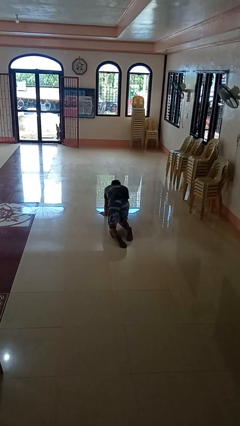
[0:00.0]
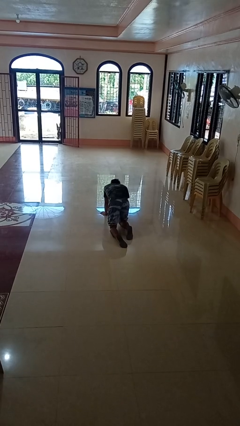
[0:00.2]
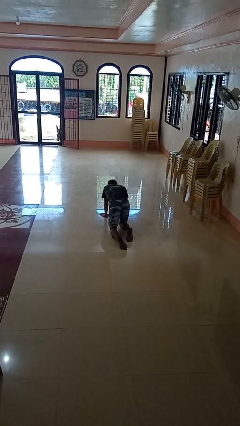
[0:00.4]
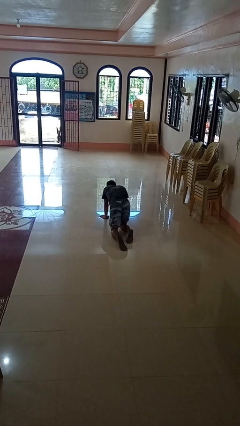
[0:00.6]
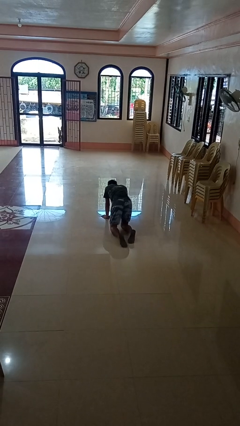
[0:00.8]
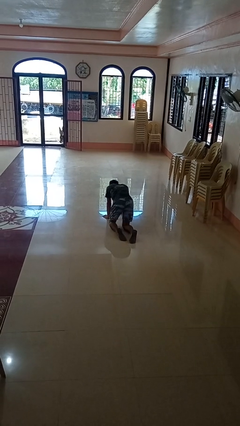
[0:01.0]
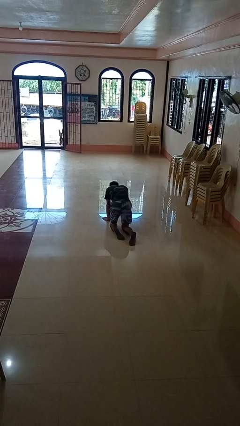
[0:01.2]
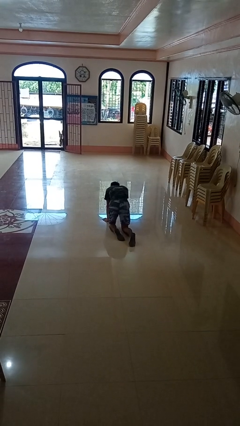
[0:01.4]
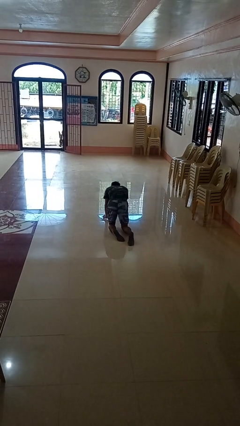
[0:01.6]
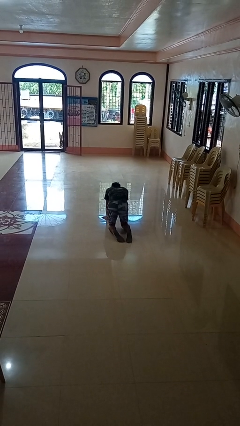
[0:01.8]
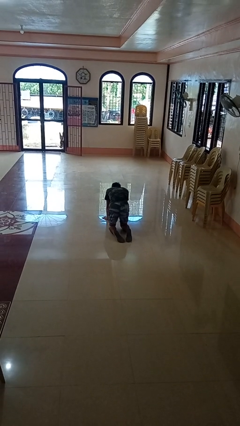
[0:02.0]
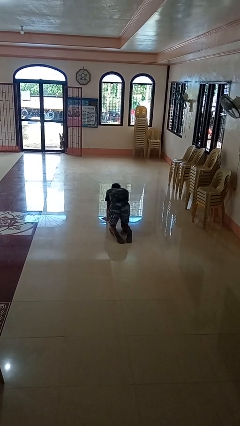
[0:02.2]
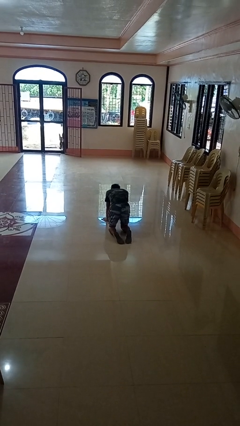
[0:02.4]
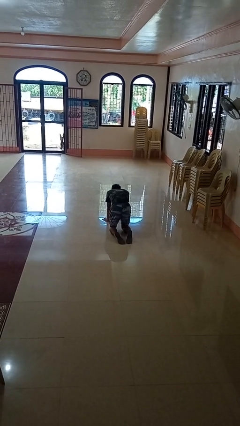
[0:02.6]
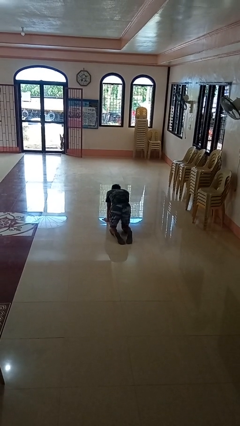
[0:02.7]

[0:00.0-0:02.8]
person crawls

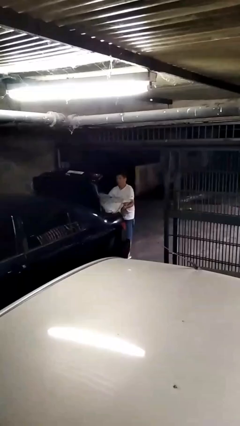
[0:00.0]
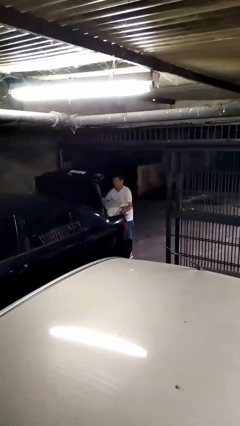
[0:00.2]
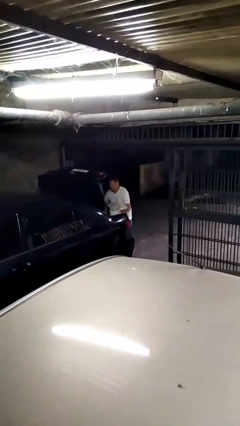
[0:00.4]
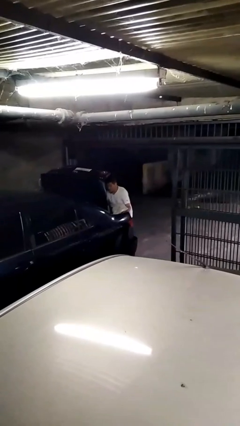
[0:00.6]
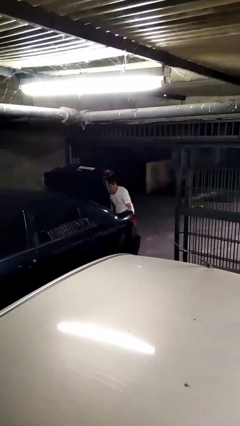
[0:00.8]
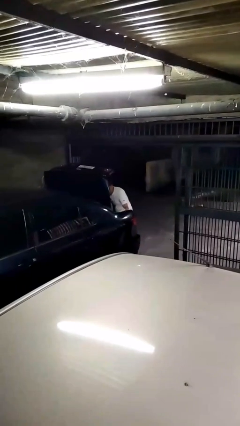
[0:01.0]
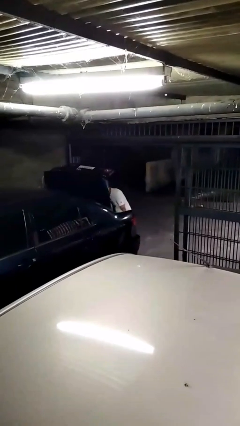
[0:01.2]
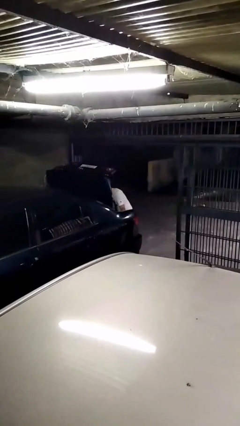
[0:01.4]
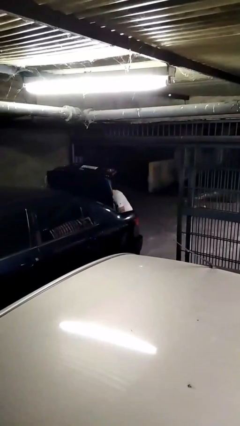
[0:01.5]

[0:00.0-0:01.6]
person loads car

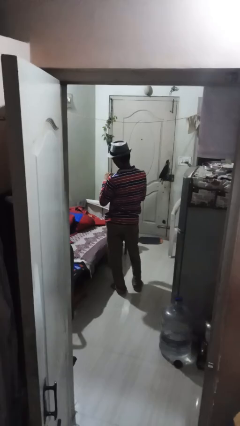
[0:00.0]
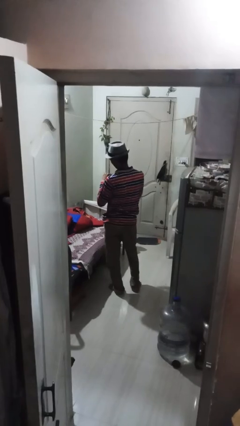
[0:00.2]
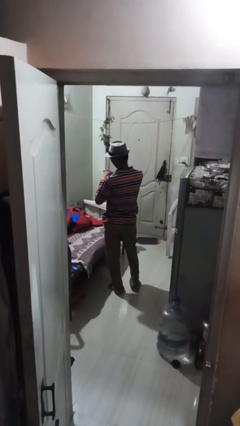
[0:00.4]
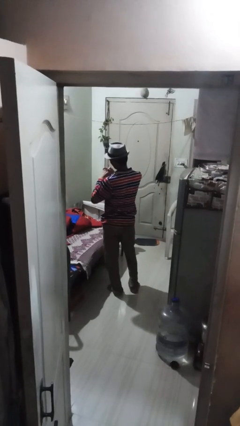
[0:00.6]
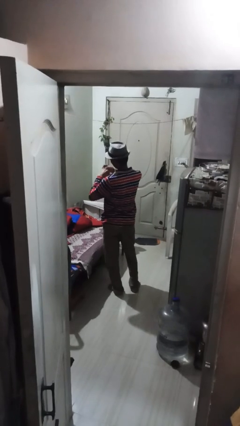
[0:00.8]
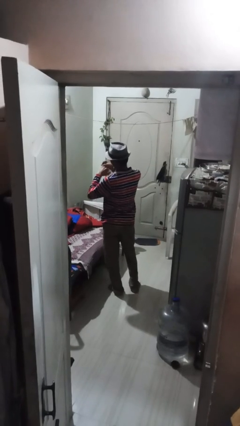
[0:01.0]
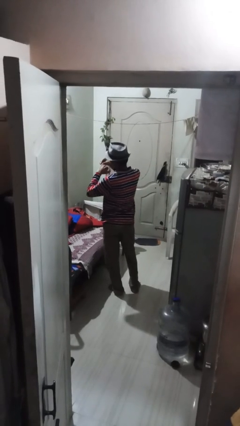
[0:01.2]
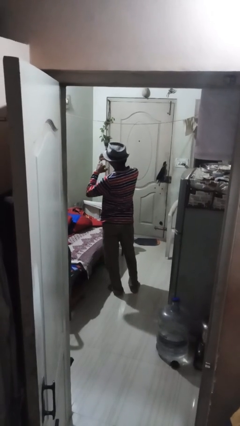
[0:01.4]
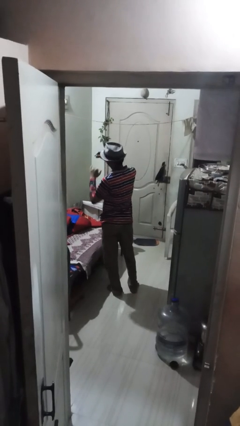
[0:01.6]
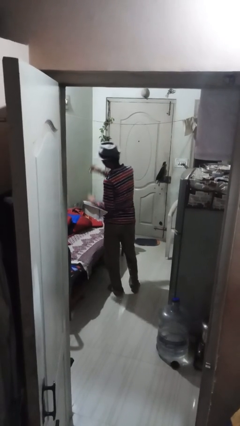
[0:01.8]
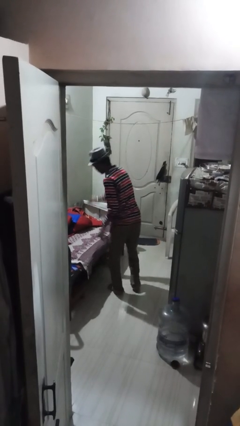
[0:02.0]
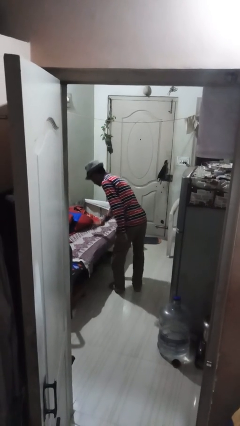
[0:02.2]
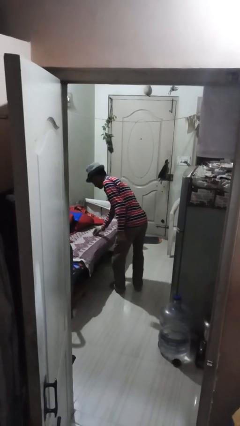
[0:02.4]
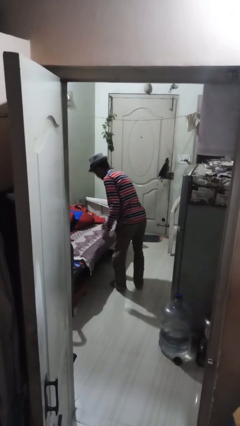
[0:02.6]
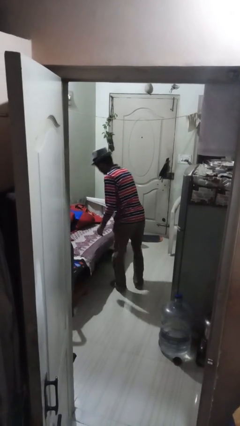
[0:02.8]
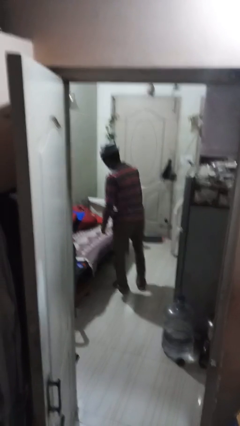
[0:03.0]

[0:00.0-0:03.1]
person takes off ring

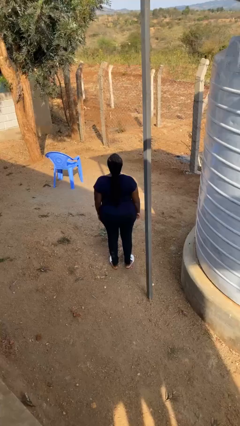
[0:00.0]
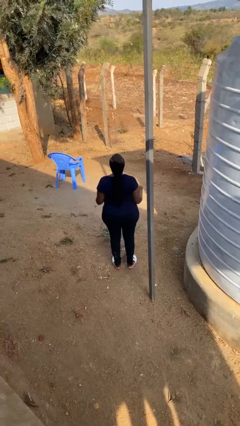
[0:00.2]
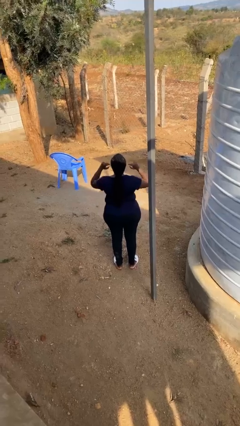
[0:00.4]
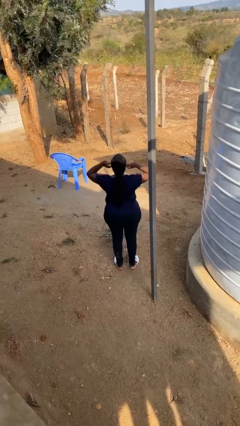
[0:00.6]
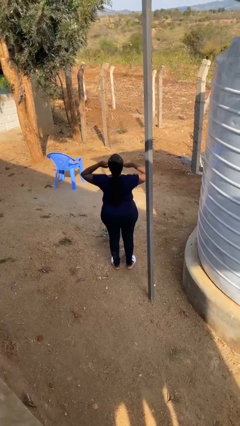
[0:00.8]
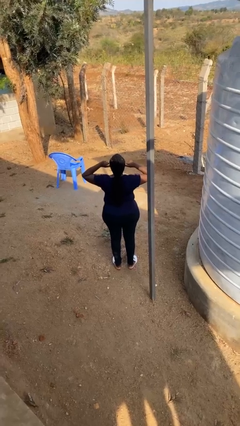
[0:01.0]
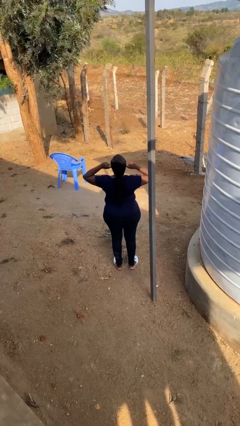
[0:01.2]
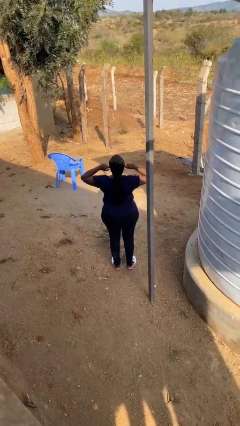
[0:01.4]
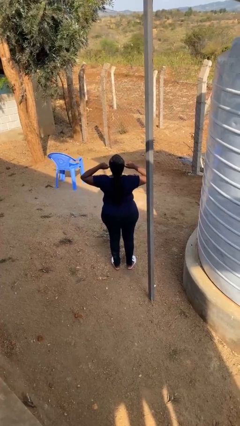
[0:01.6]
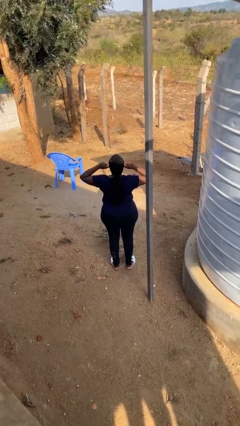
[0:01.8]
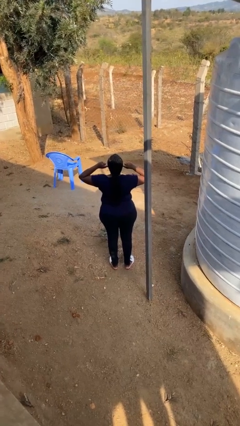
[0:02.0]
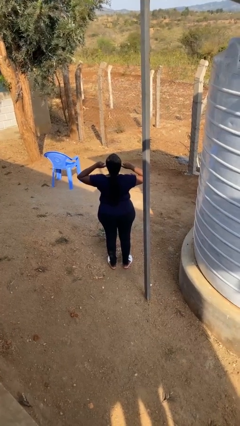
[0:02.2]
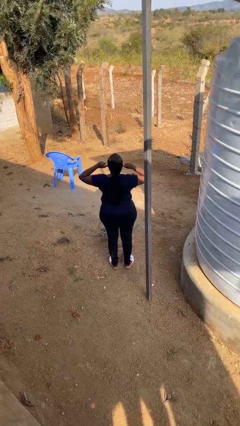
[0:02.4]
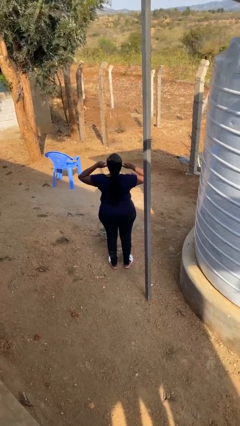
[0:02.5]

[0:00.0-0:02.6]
person puts fingers in ear

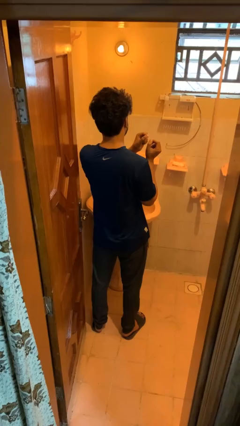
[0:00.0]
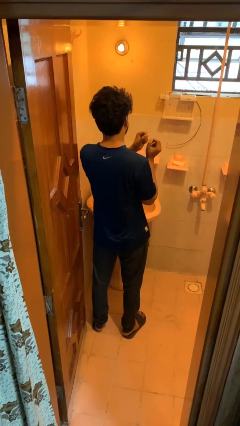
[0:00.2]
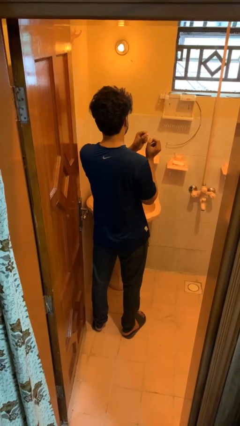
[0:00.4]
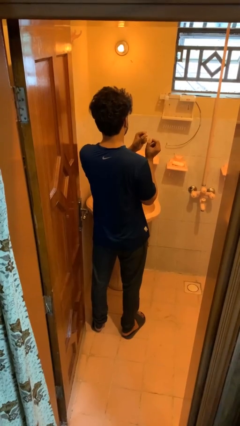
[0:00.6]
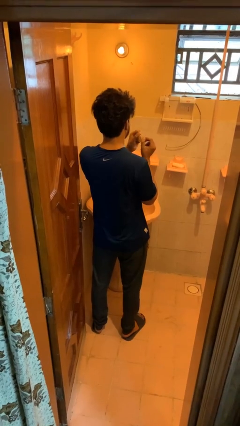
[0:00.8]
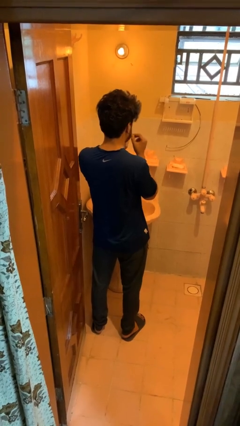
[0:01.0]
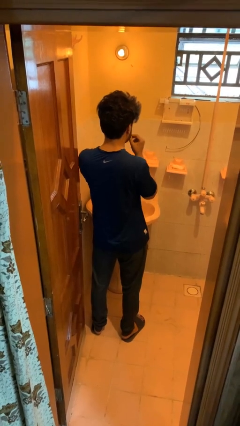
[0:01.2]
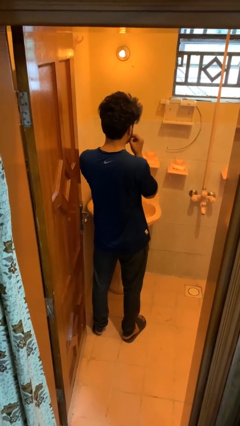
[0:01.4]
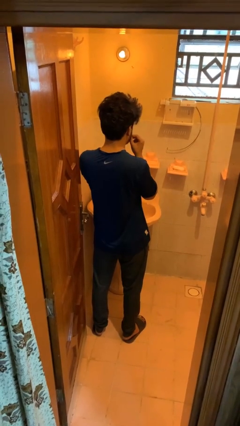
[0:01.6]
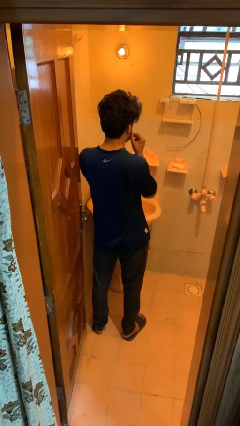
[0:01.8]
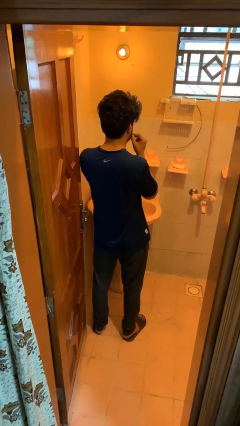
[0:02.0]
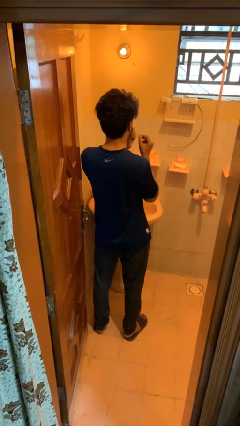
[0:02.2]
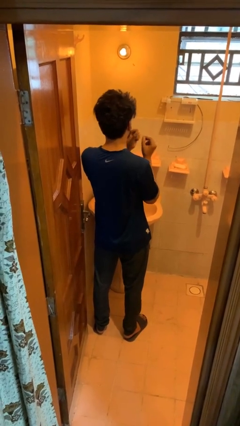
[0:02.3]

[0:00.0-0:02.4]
person applies deodorant

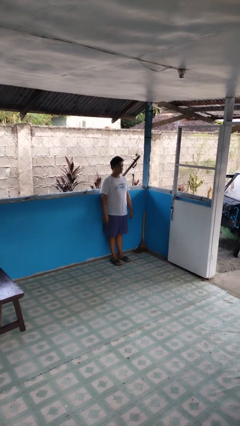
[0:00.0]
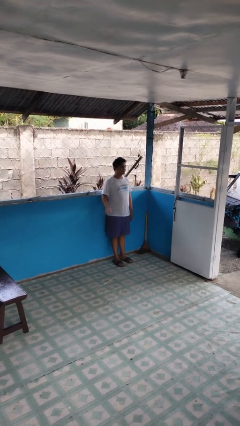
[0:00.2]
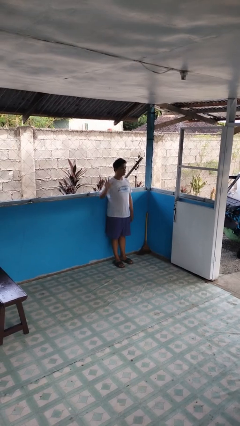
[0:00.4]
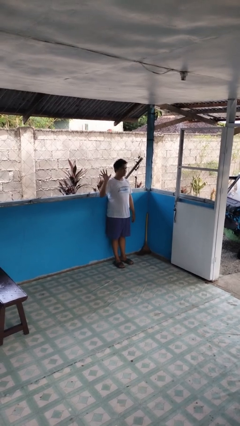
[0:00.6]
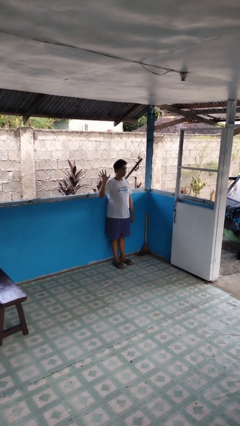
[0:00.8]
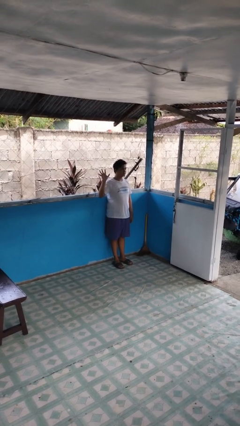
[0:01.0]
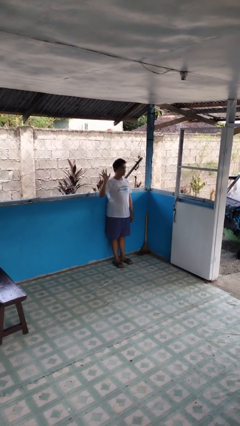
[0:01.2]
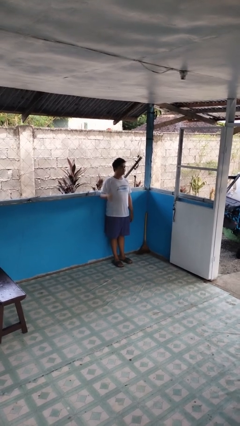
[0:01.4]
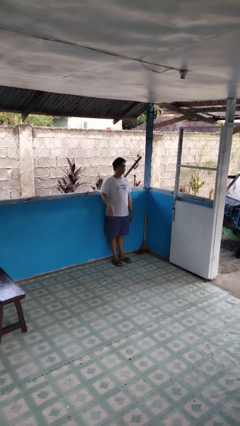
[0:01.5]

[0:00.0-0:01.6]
person gestures number five

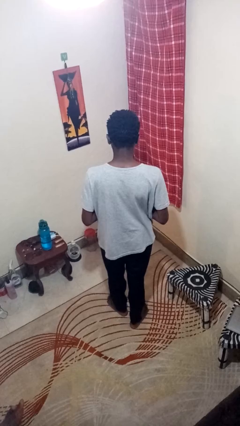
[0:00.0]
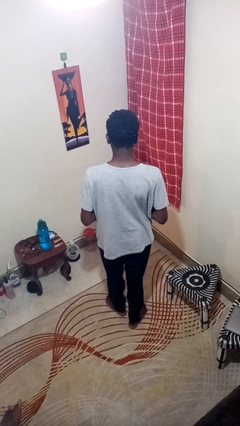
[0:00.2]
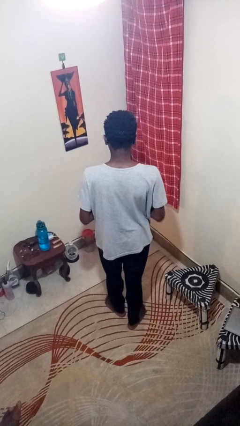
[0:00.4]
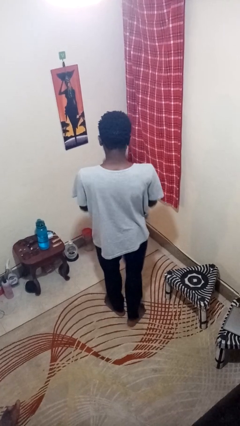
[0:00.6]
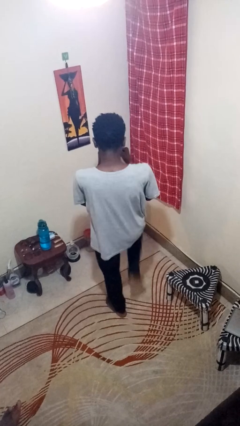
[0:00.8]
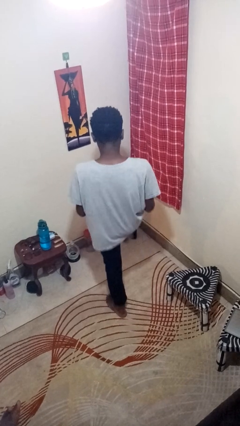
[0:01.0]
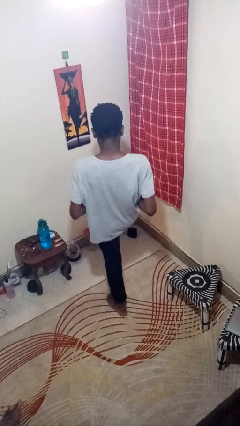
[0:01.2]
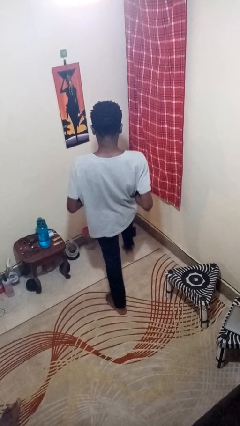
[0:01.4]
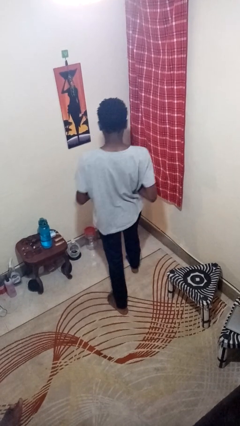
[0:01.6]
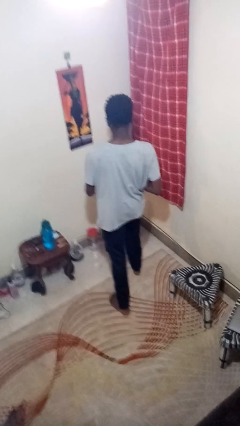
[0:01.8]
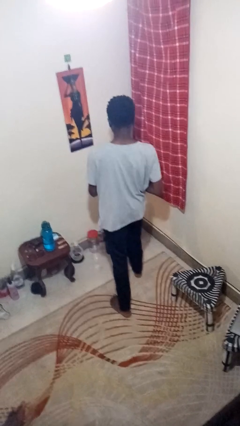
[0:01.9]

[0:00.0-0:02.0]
person karate kicks

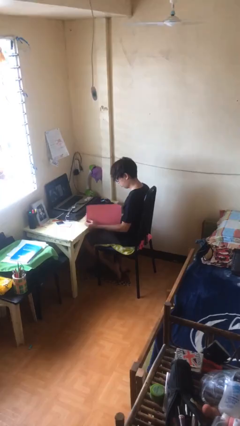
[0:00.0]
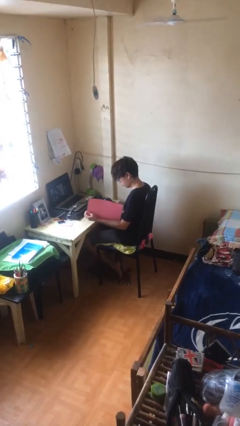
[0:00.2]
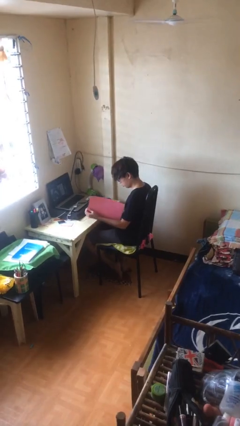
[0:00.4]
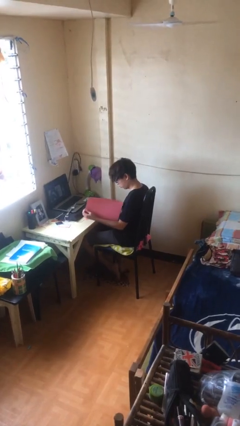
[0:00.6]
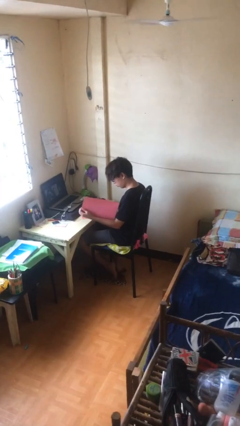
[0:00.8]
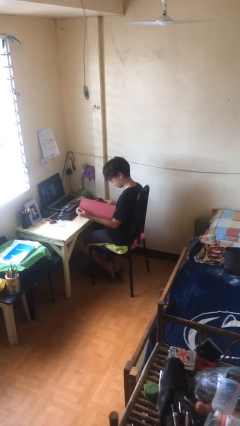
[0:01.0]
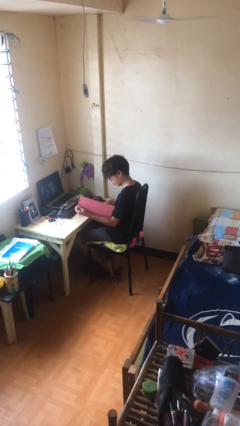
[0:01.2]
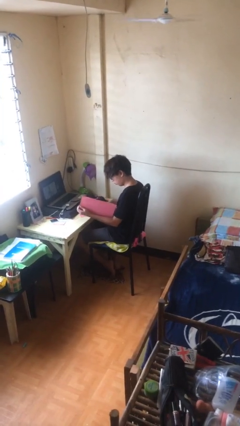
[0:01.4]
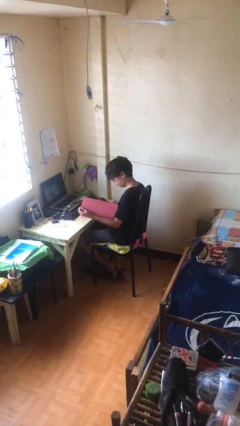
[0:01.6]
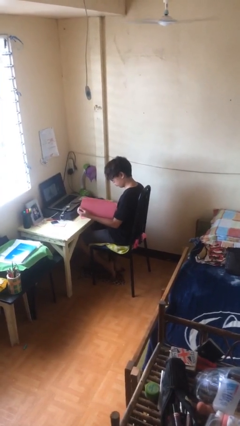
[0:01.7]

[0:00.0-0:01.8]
person reads document
